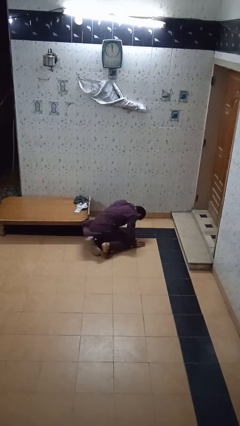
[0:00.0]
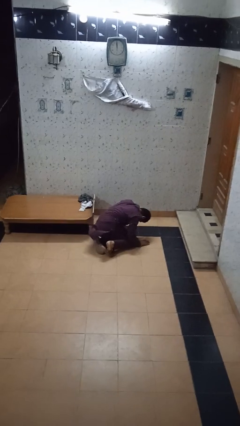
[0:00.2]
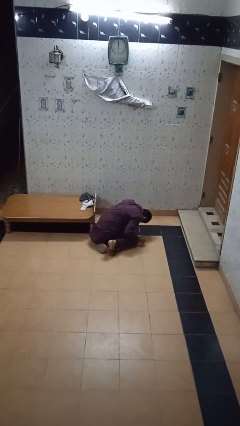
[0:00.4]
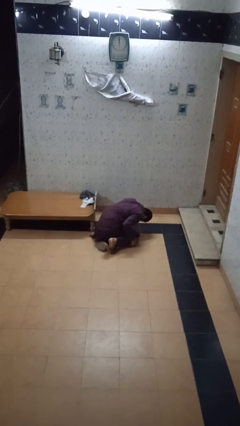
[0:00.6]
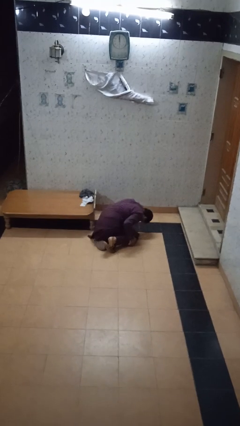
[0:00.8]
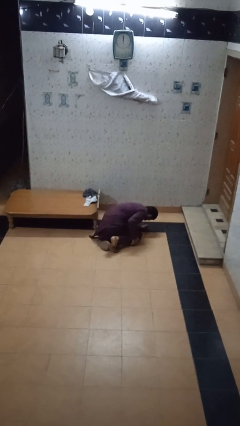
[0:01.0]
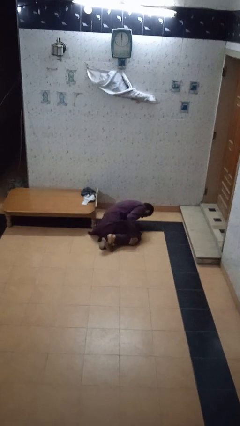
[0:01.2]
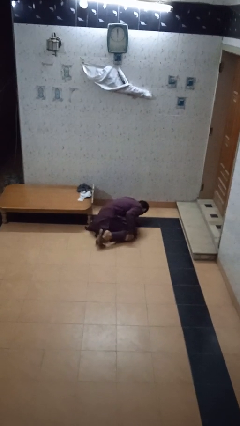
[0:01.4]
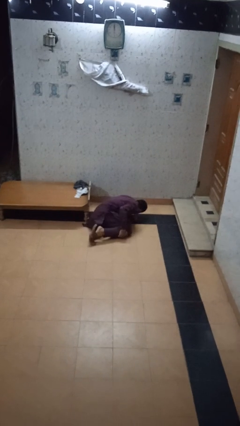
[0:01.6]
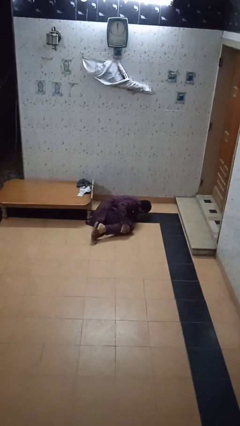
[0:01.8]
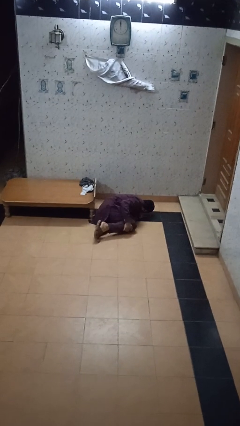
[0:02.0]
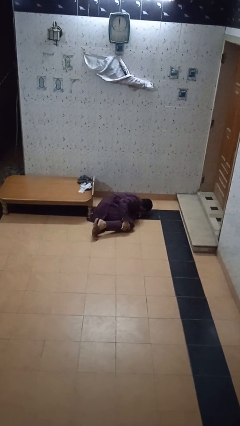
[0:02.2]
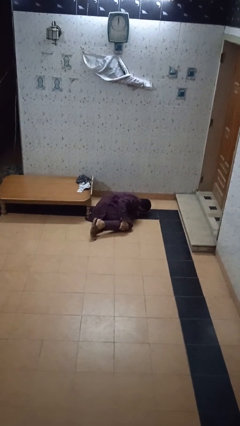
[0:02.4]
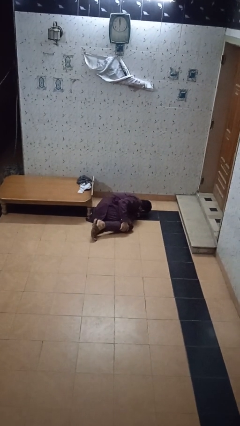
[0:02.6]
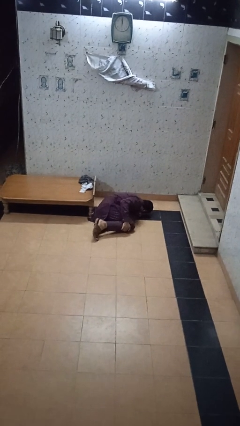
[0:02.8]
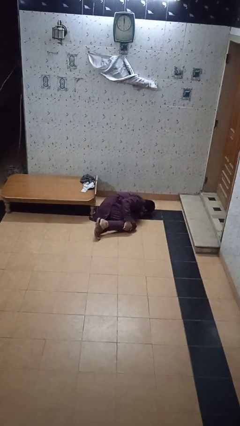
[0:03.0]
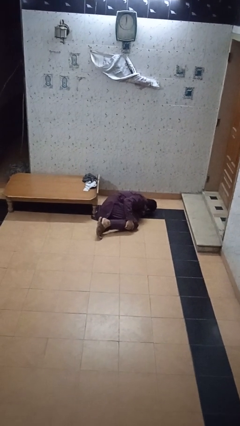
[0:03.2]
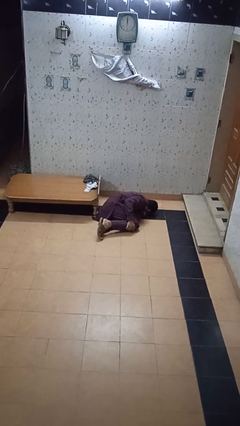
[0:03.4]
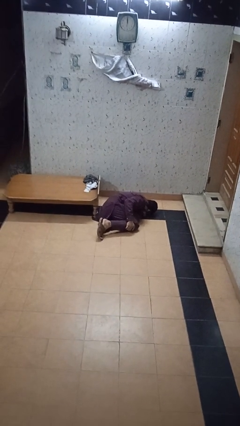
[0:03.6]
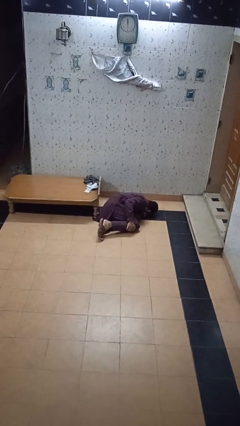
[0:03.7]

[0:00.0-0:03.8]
person lies down on floor

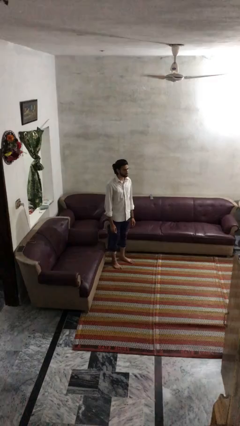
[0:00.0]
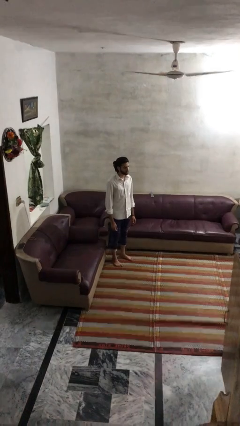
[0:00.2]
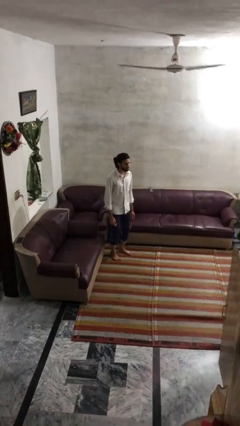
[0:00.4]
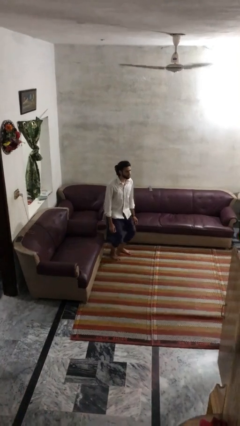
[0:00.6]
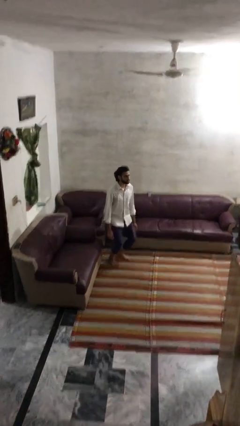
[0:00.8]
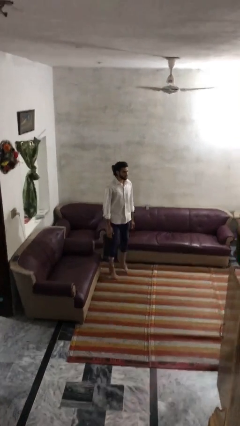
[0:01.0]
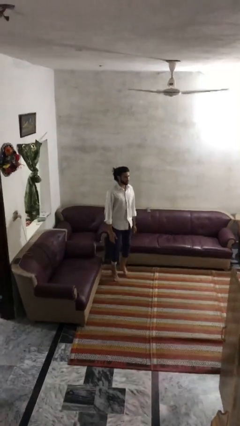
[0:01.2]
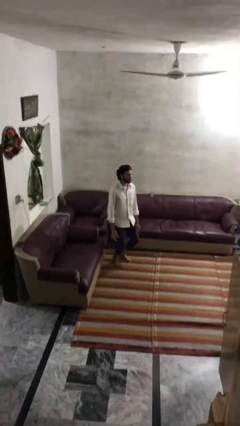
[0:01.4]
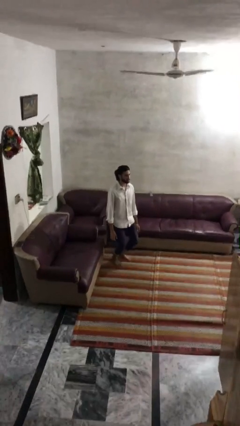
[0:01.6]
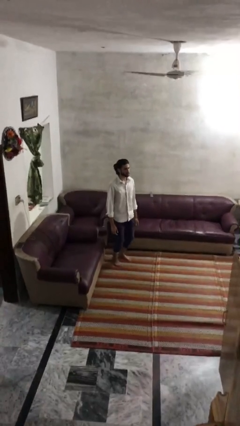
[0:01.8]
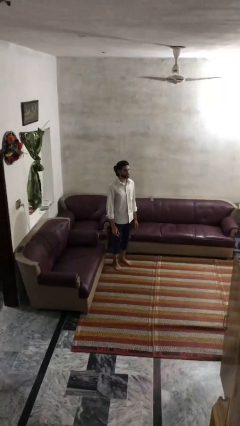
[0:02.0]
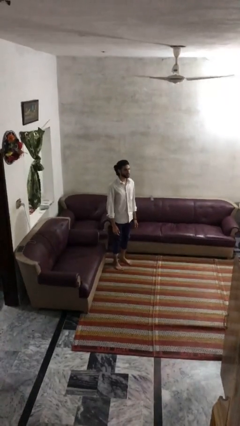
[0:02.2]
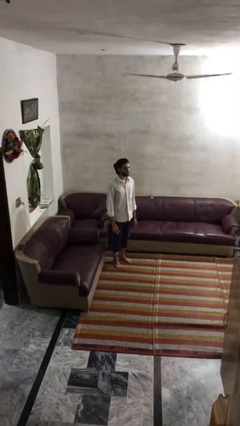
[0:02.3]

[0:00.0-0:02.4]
person jumps

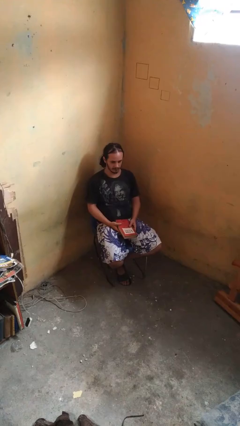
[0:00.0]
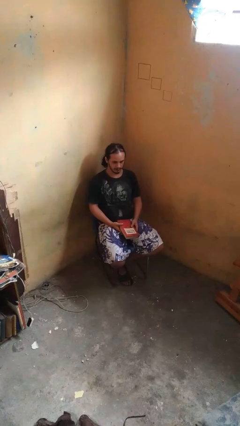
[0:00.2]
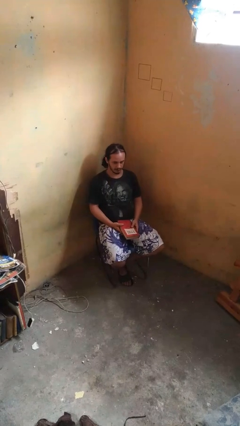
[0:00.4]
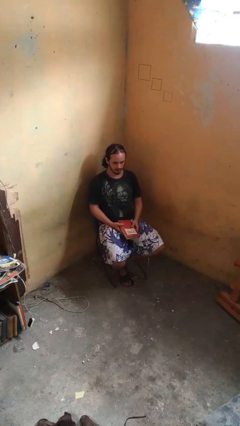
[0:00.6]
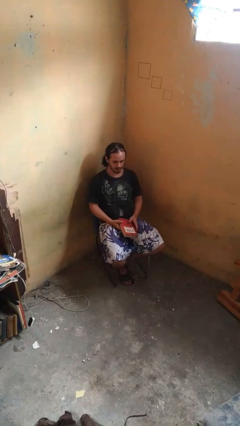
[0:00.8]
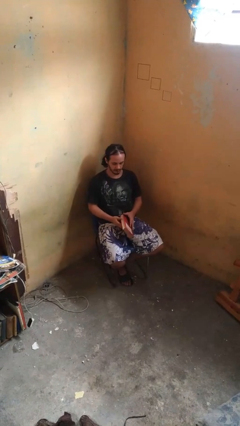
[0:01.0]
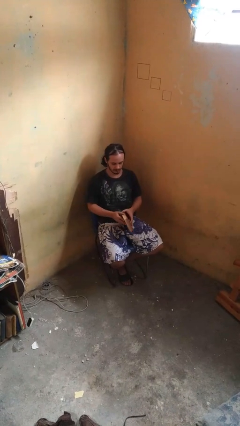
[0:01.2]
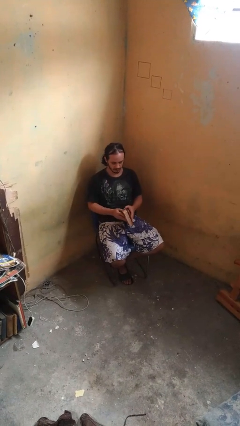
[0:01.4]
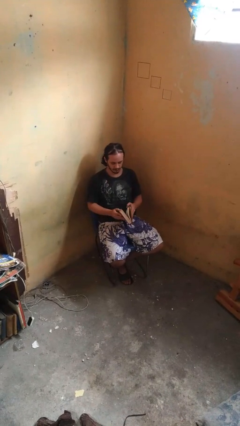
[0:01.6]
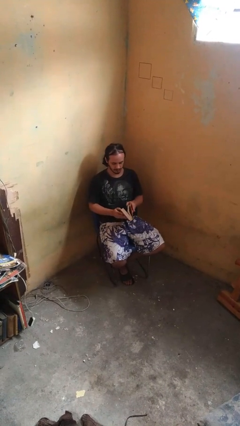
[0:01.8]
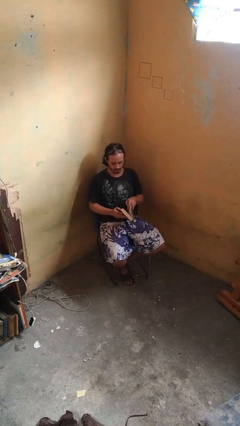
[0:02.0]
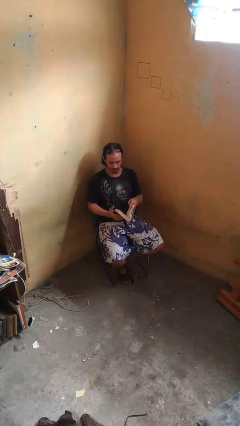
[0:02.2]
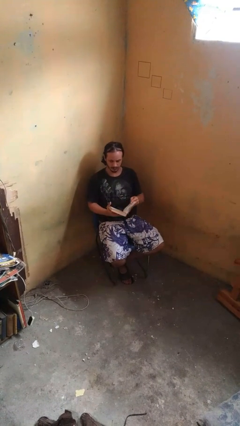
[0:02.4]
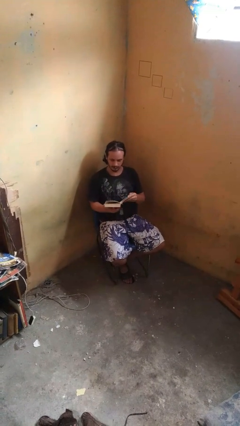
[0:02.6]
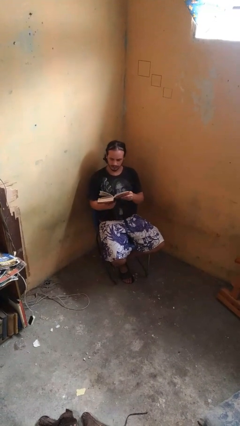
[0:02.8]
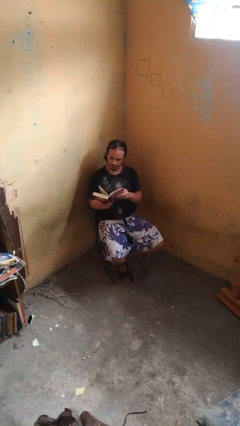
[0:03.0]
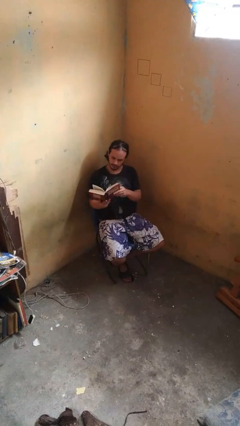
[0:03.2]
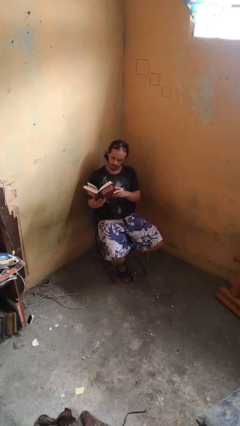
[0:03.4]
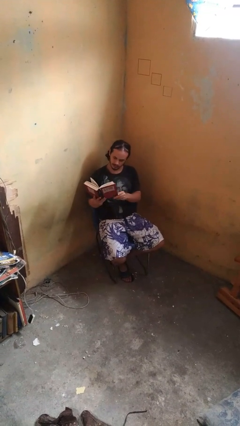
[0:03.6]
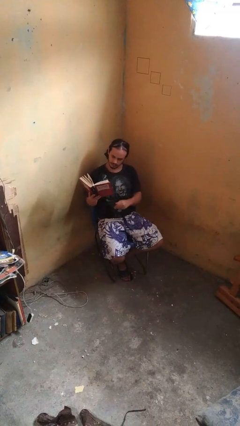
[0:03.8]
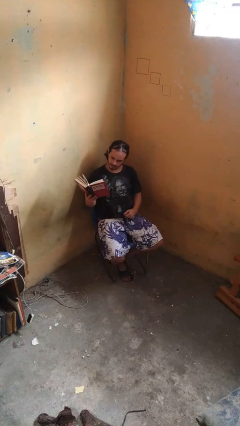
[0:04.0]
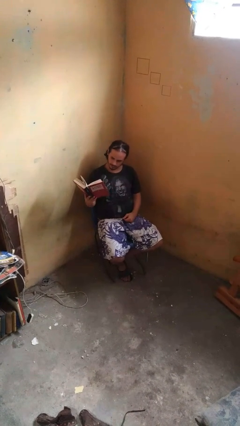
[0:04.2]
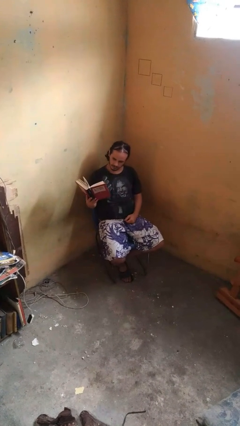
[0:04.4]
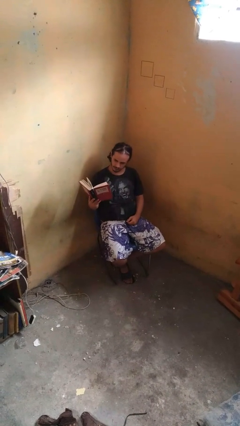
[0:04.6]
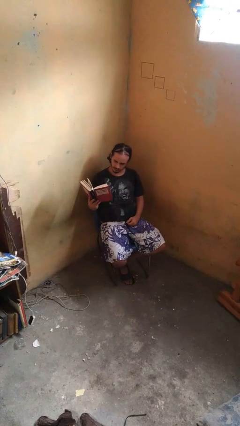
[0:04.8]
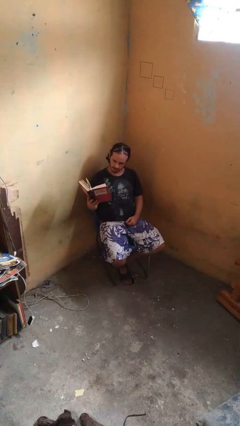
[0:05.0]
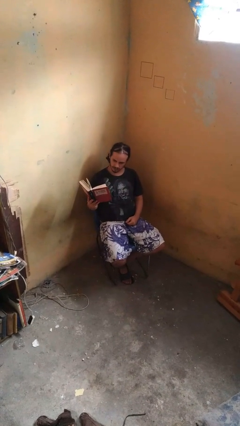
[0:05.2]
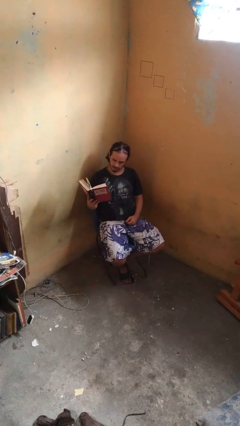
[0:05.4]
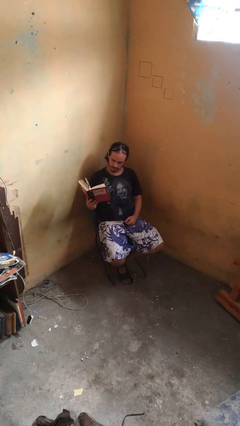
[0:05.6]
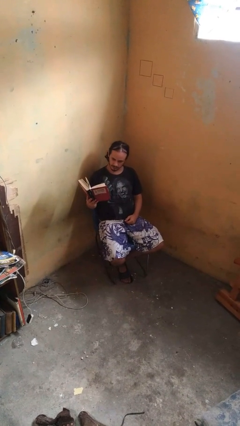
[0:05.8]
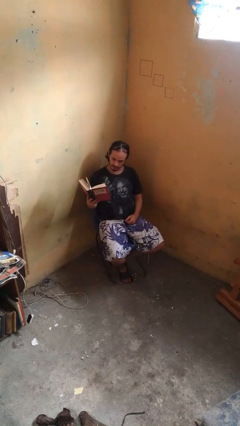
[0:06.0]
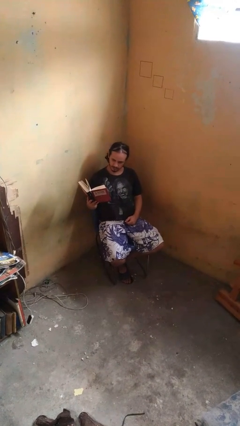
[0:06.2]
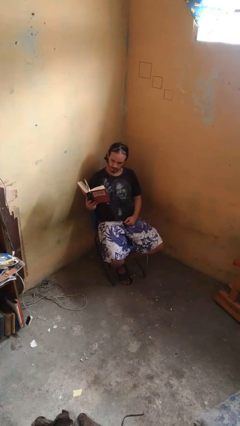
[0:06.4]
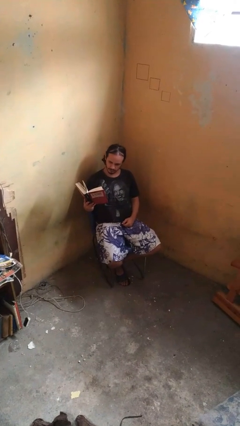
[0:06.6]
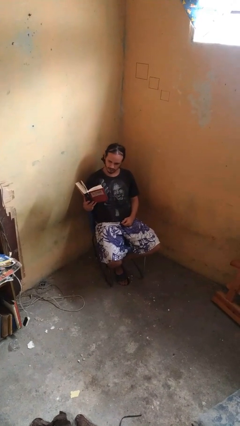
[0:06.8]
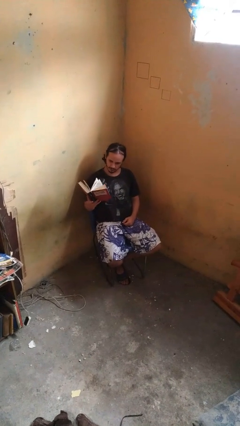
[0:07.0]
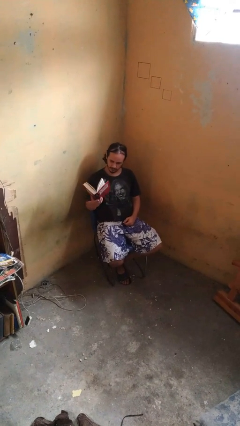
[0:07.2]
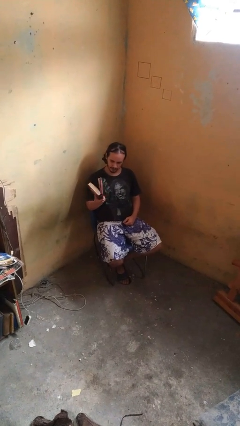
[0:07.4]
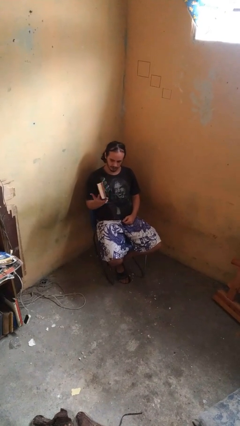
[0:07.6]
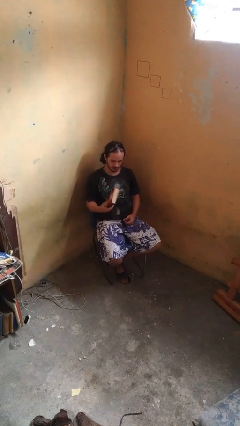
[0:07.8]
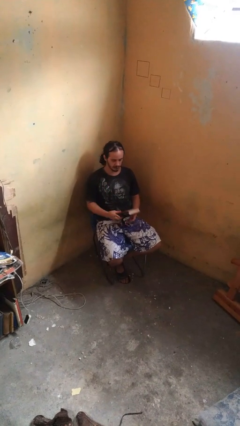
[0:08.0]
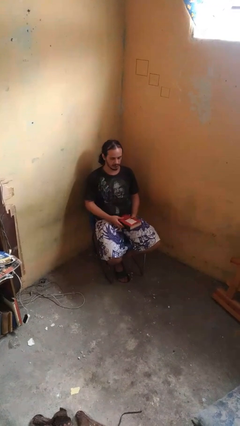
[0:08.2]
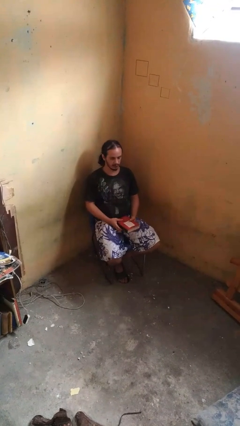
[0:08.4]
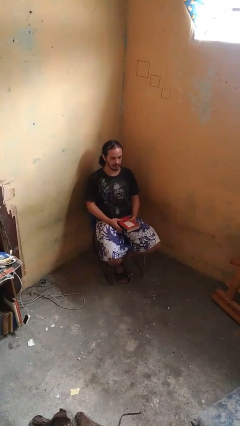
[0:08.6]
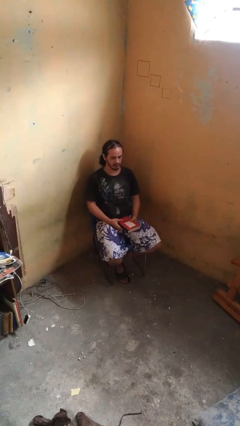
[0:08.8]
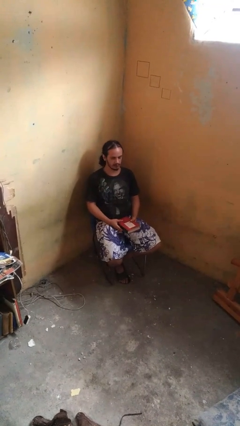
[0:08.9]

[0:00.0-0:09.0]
person reads book

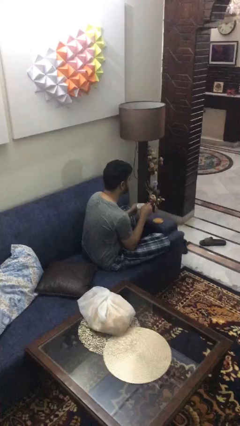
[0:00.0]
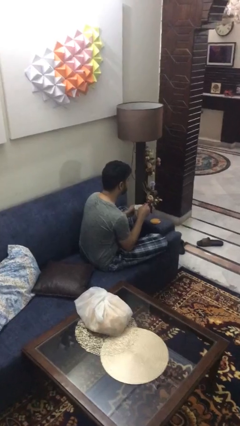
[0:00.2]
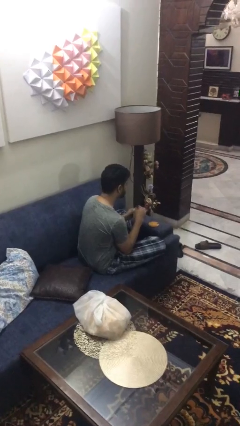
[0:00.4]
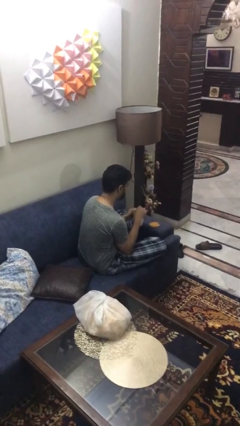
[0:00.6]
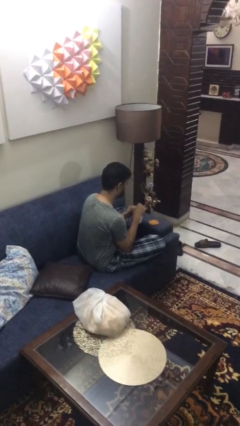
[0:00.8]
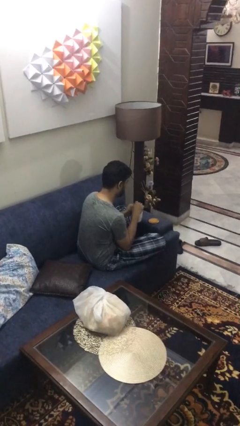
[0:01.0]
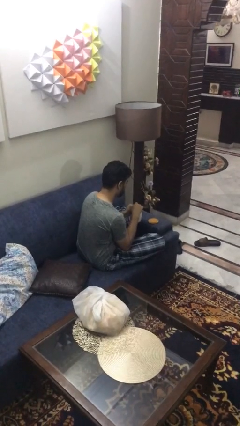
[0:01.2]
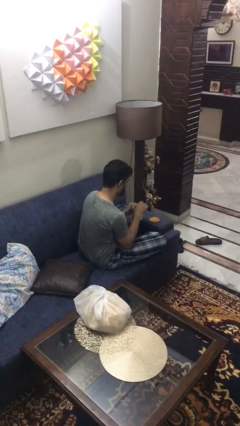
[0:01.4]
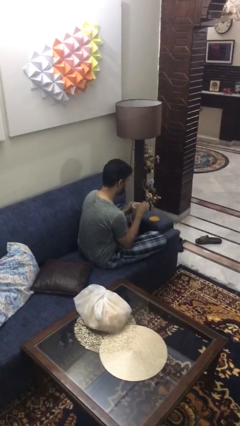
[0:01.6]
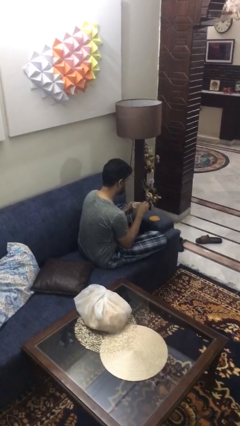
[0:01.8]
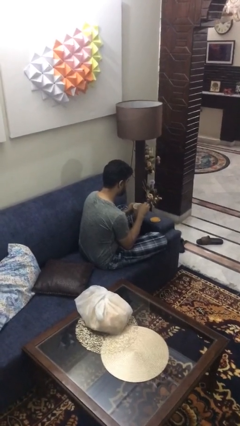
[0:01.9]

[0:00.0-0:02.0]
person stirs mug
